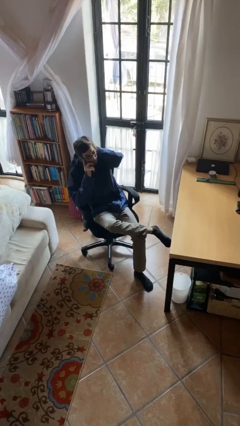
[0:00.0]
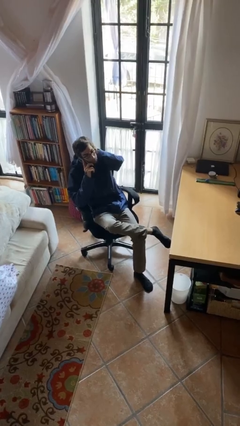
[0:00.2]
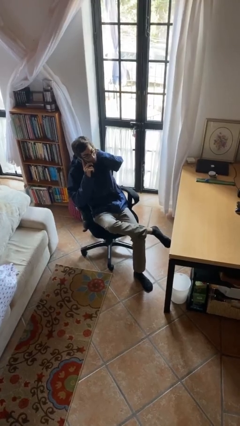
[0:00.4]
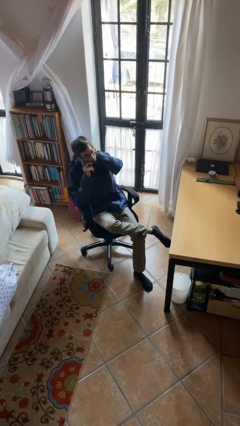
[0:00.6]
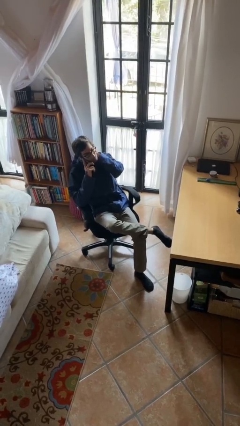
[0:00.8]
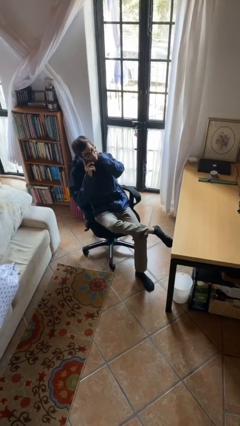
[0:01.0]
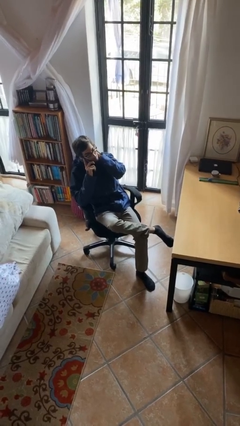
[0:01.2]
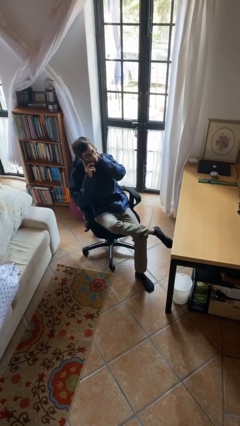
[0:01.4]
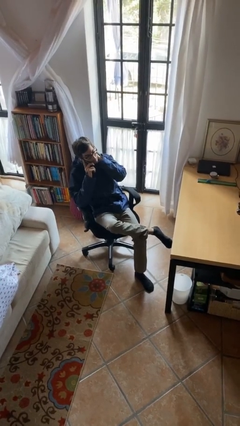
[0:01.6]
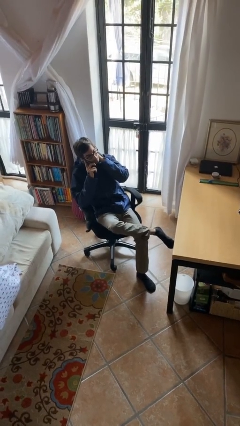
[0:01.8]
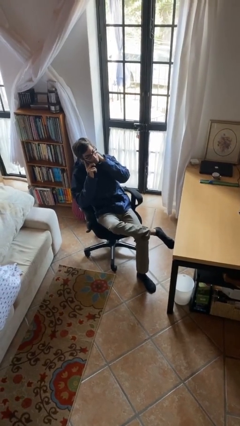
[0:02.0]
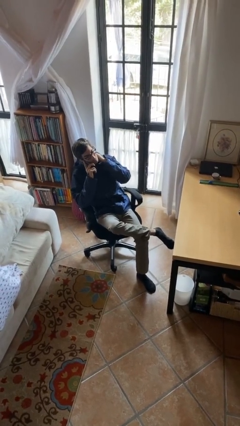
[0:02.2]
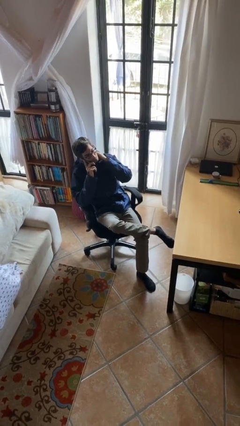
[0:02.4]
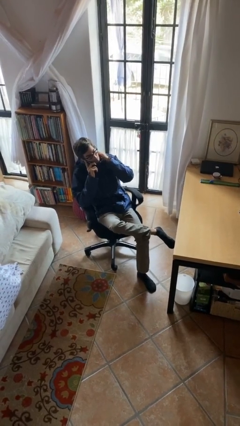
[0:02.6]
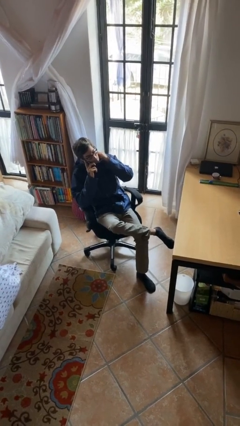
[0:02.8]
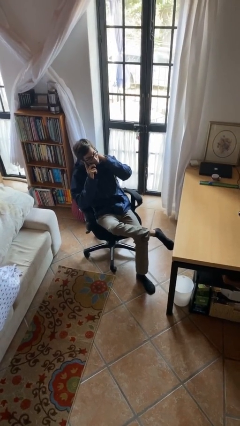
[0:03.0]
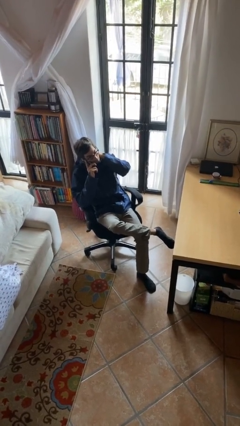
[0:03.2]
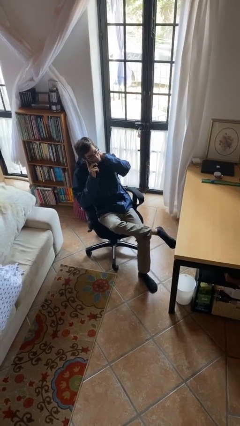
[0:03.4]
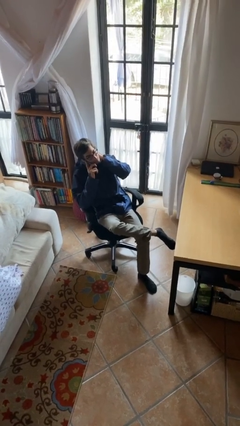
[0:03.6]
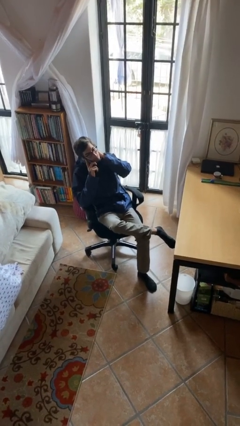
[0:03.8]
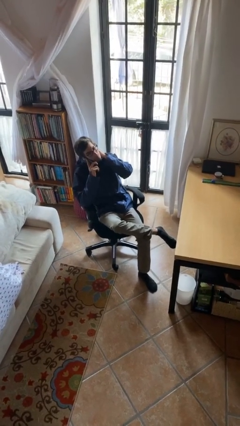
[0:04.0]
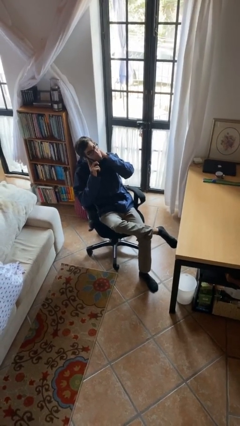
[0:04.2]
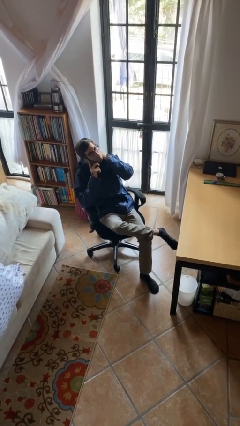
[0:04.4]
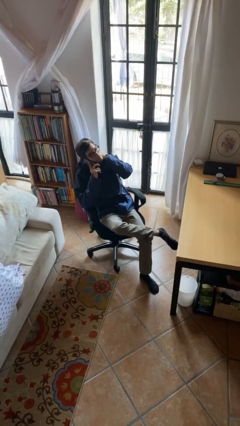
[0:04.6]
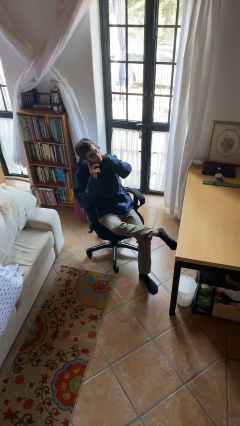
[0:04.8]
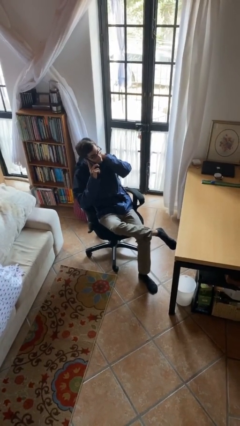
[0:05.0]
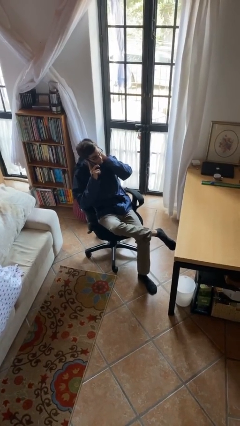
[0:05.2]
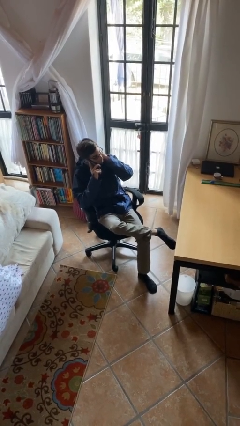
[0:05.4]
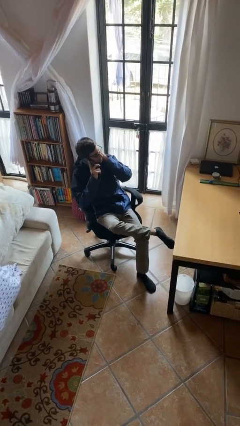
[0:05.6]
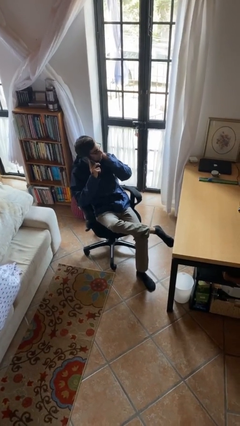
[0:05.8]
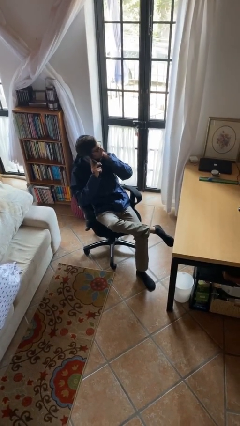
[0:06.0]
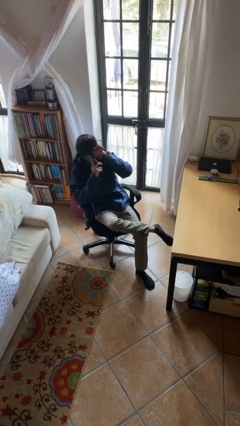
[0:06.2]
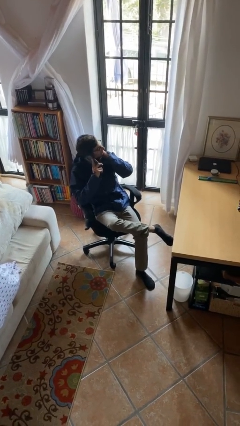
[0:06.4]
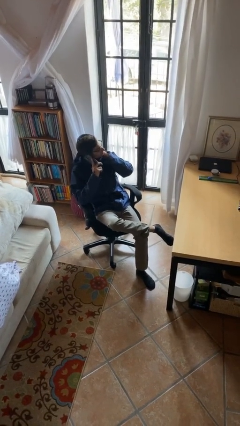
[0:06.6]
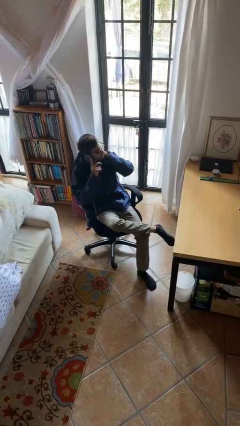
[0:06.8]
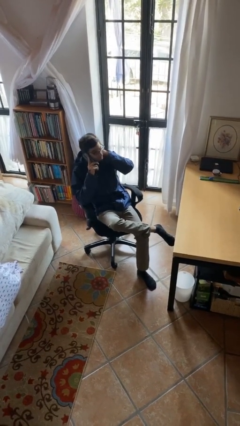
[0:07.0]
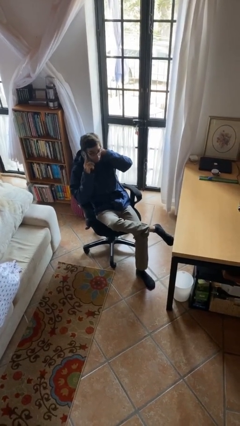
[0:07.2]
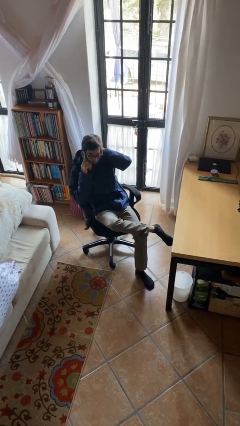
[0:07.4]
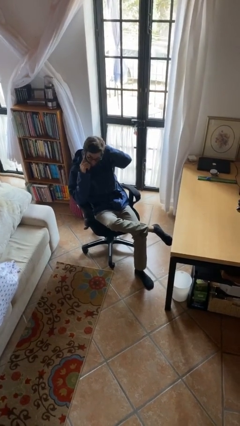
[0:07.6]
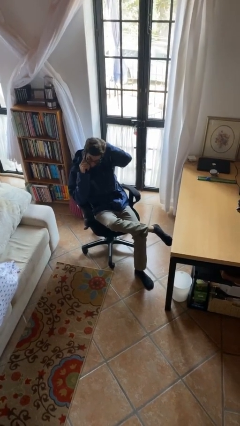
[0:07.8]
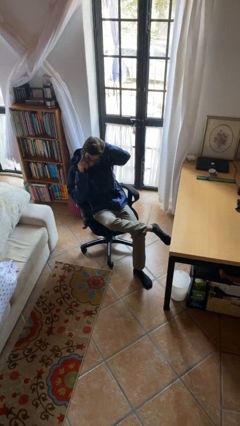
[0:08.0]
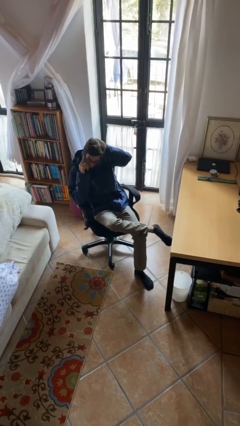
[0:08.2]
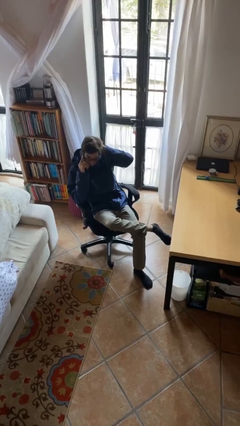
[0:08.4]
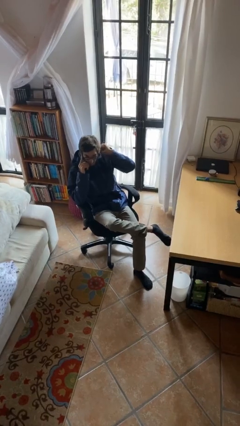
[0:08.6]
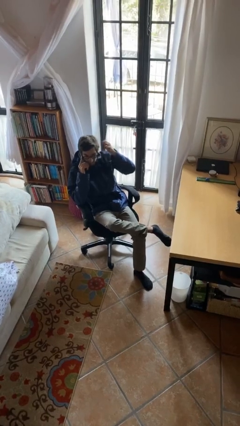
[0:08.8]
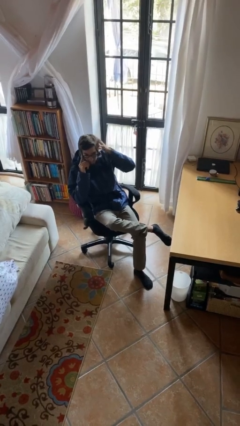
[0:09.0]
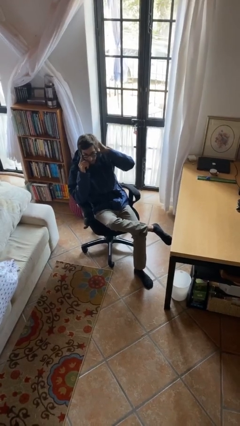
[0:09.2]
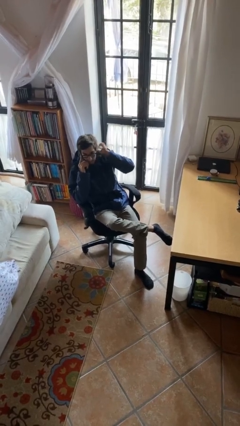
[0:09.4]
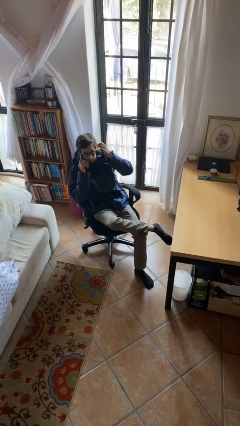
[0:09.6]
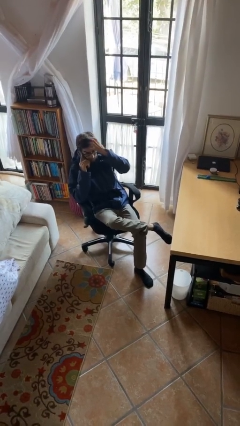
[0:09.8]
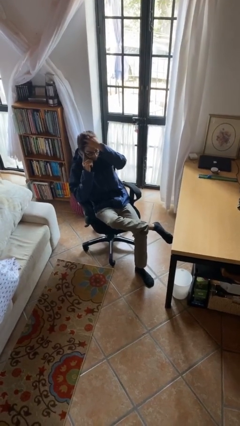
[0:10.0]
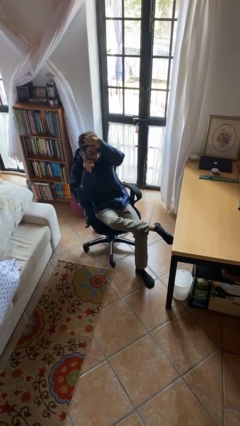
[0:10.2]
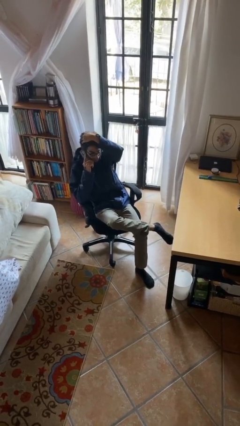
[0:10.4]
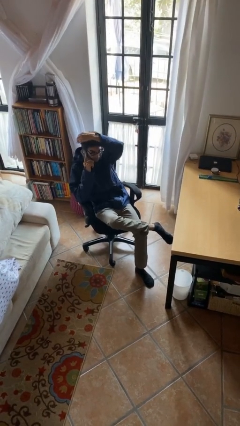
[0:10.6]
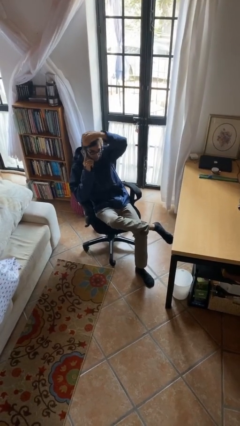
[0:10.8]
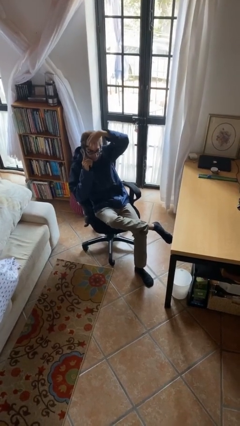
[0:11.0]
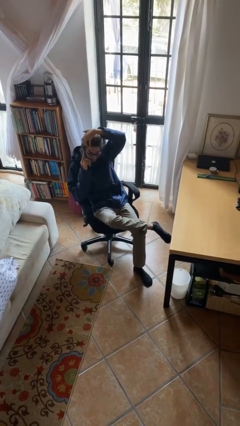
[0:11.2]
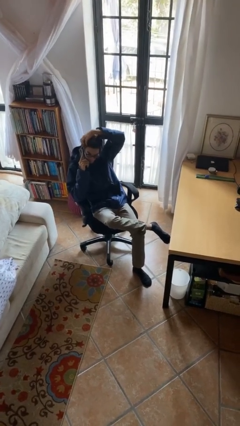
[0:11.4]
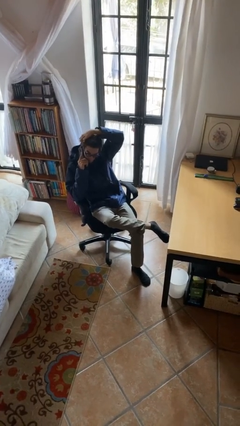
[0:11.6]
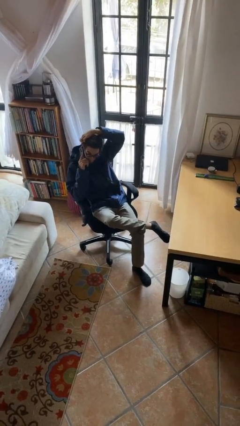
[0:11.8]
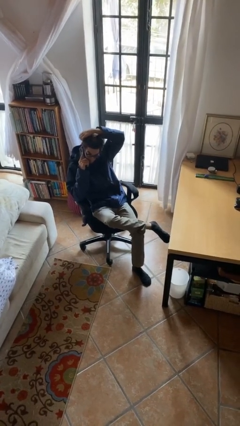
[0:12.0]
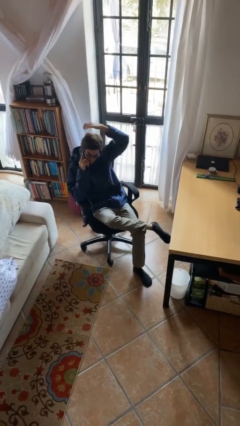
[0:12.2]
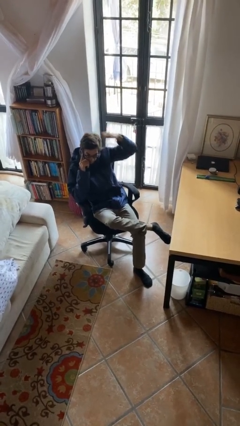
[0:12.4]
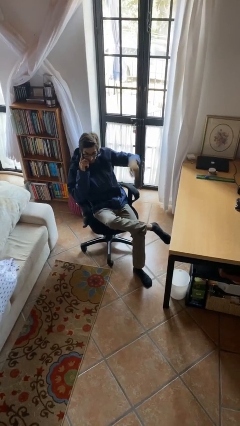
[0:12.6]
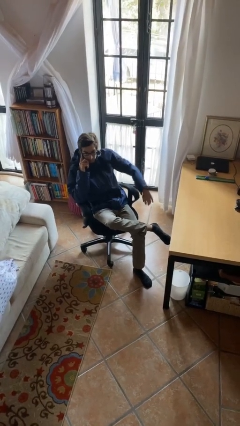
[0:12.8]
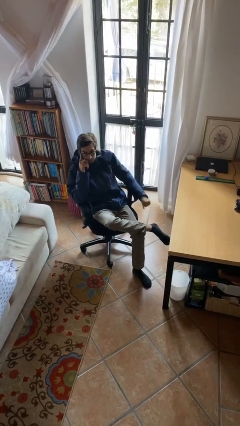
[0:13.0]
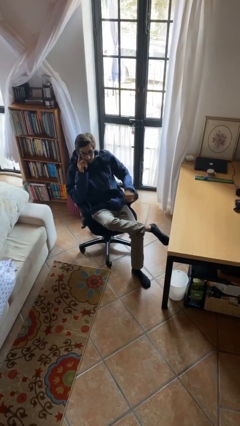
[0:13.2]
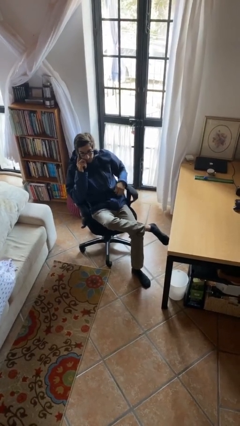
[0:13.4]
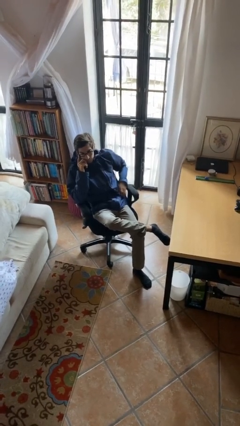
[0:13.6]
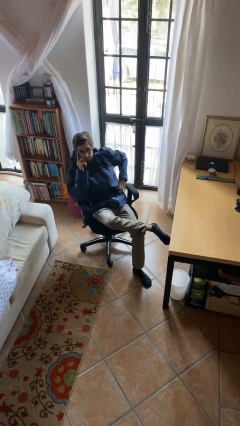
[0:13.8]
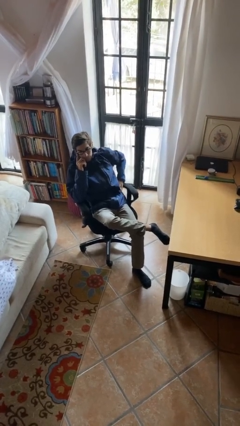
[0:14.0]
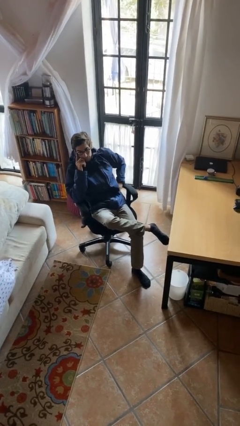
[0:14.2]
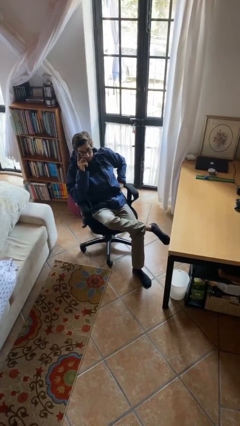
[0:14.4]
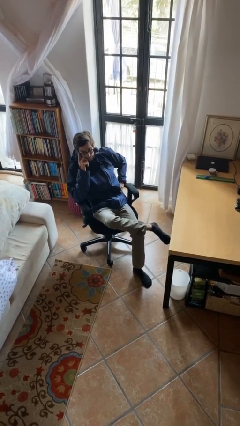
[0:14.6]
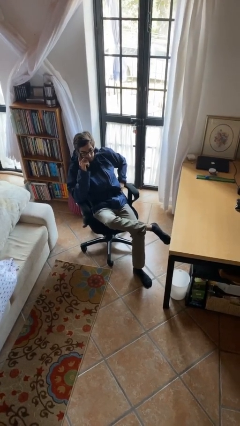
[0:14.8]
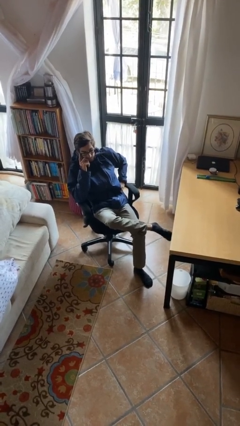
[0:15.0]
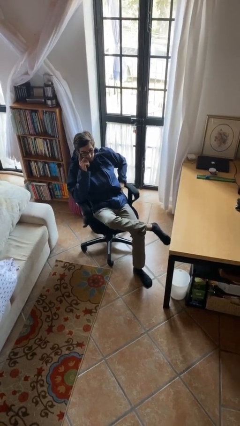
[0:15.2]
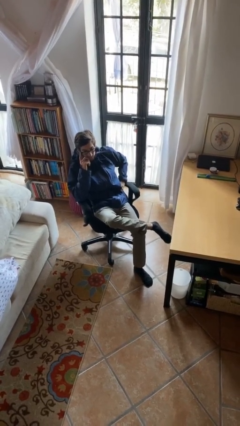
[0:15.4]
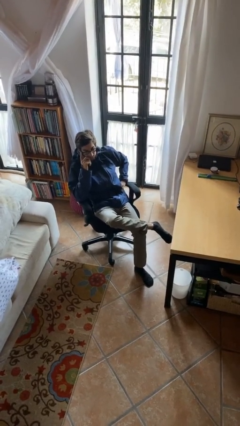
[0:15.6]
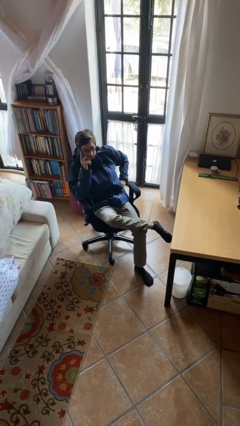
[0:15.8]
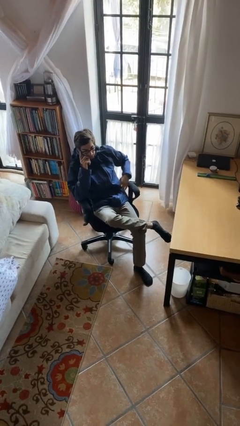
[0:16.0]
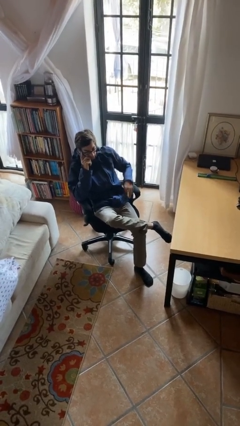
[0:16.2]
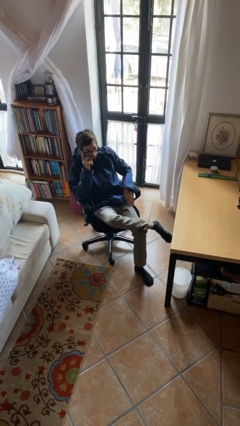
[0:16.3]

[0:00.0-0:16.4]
person talks on phone

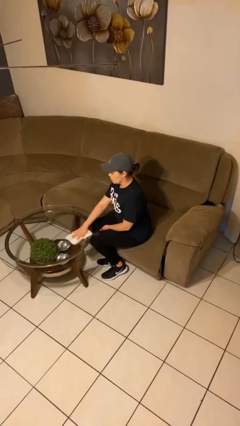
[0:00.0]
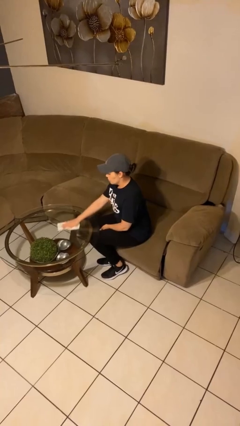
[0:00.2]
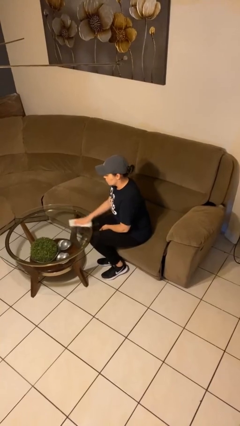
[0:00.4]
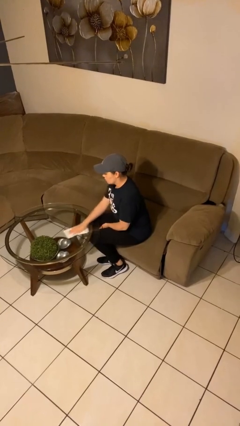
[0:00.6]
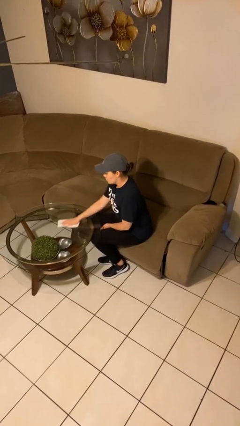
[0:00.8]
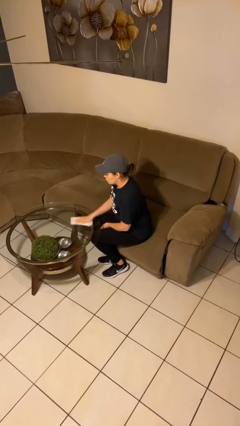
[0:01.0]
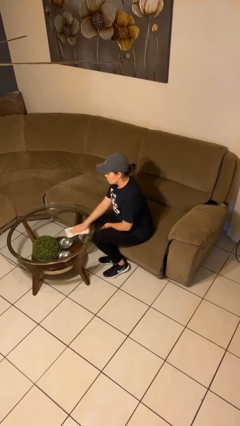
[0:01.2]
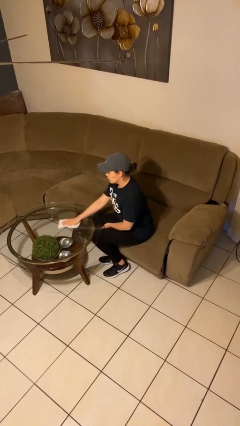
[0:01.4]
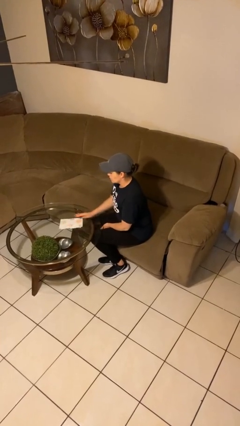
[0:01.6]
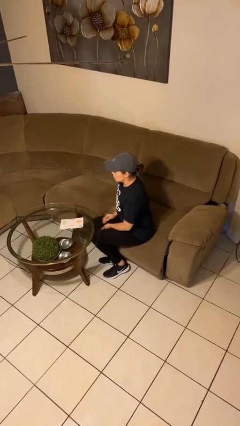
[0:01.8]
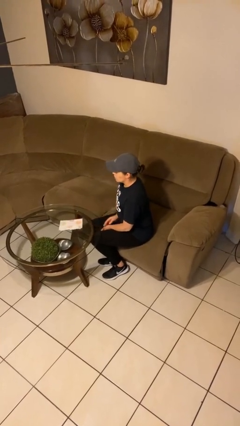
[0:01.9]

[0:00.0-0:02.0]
person cleans table with rag
